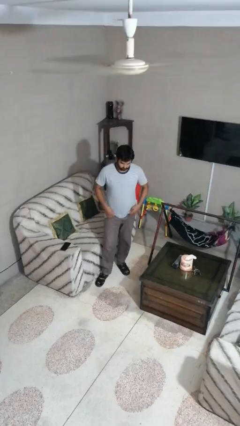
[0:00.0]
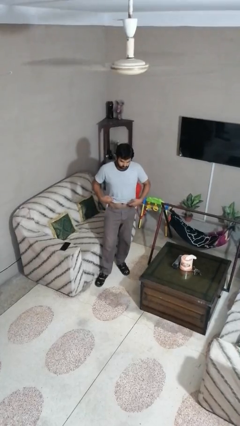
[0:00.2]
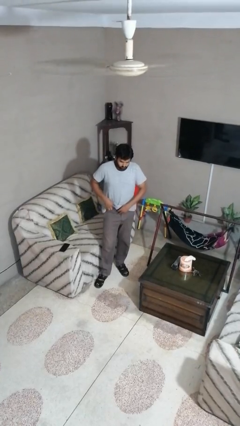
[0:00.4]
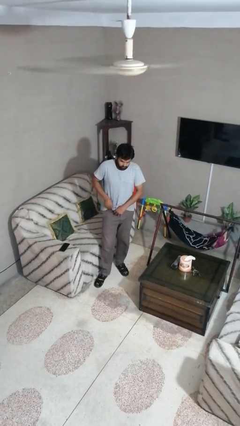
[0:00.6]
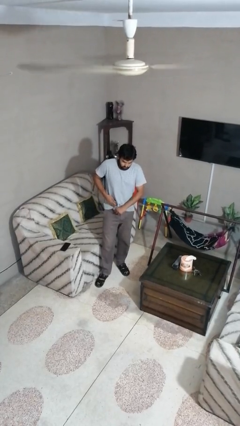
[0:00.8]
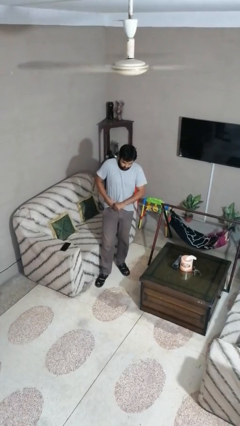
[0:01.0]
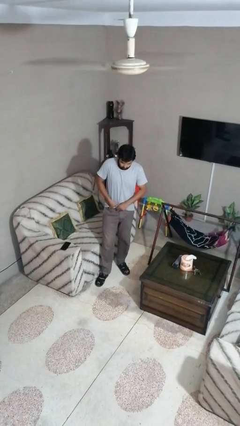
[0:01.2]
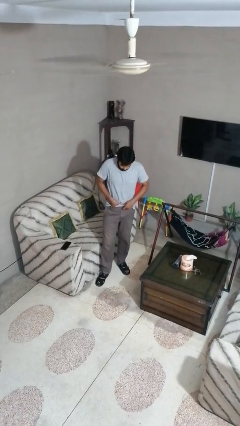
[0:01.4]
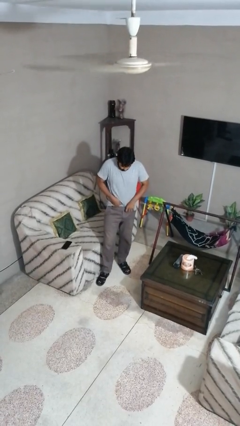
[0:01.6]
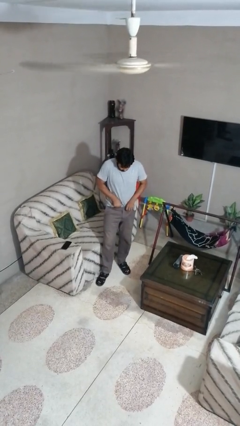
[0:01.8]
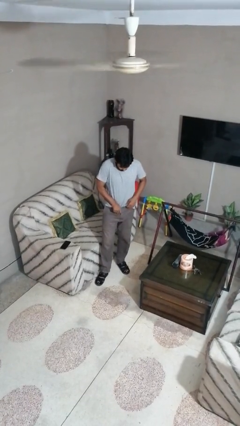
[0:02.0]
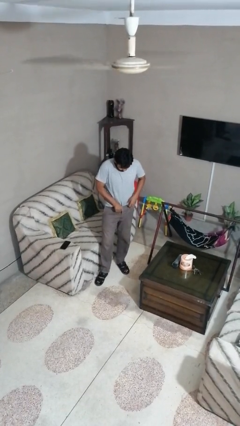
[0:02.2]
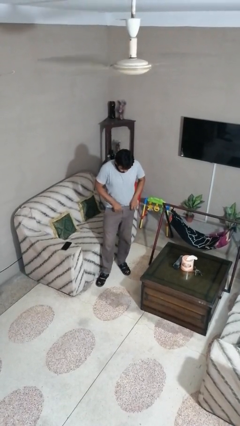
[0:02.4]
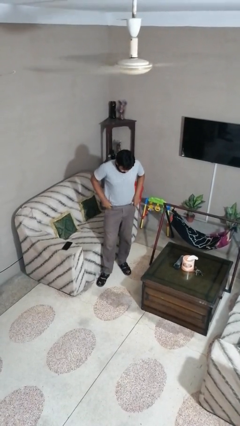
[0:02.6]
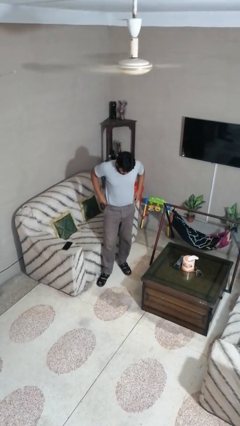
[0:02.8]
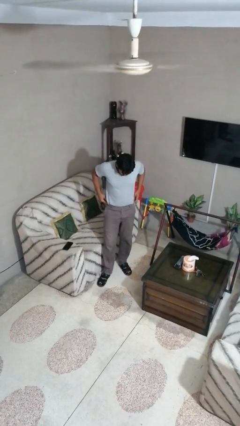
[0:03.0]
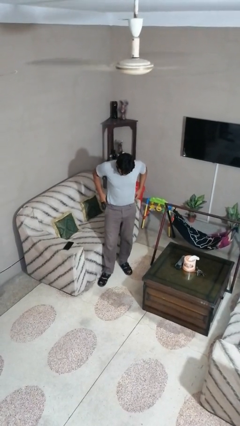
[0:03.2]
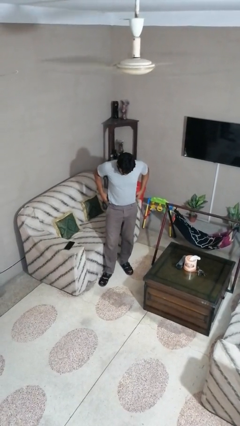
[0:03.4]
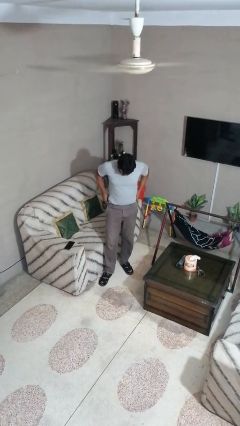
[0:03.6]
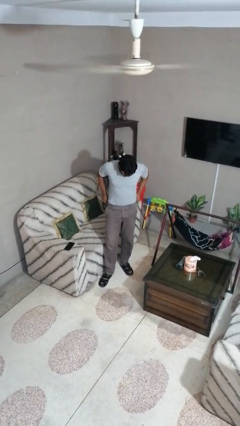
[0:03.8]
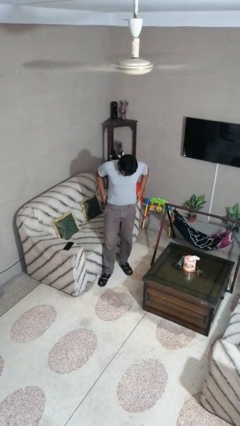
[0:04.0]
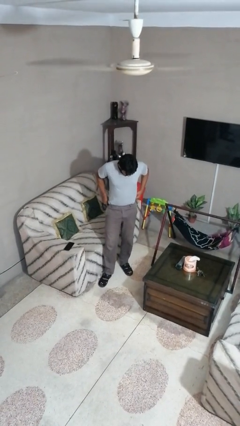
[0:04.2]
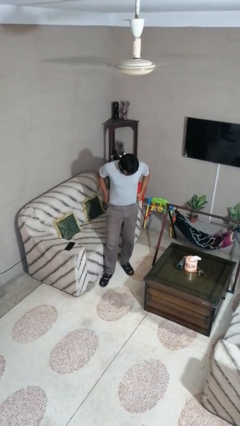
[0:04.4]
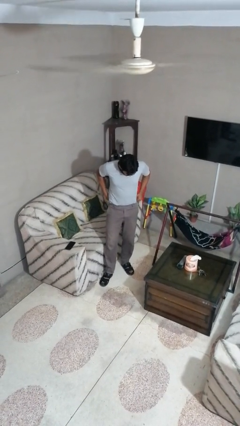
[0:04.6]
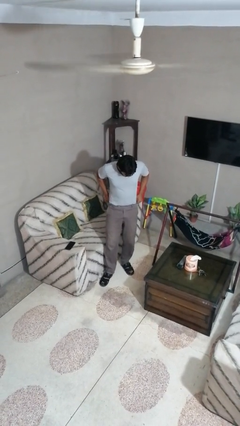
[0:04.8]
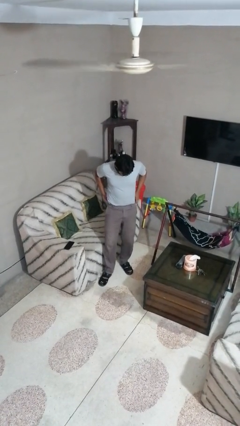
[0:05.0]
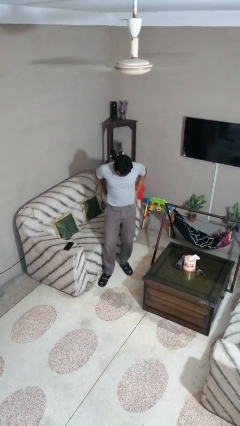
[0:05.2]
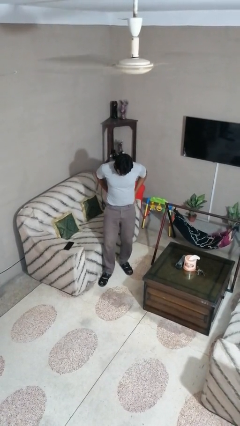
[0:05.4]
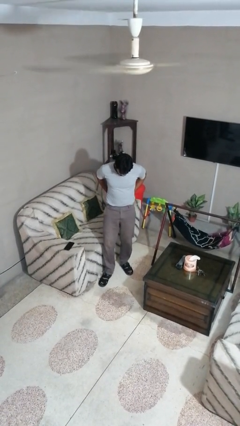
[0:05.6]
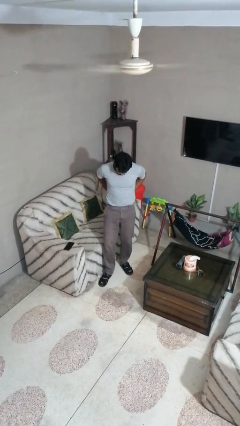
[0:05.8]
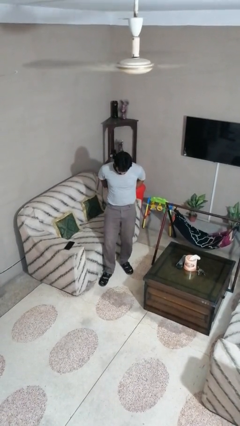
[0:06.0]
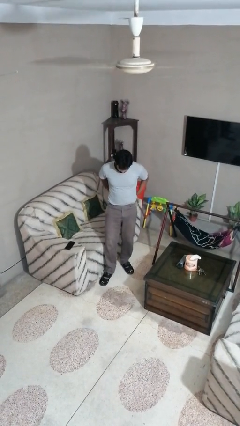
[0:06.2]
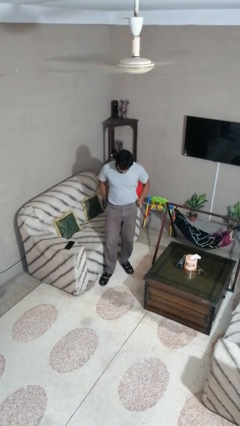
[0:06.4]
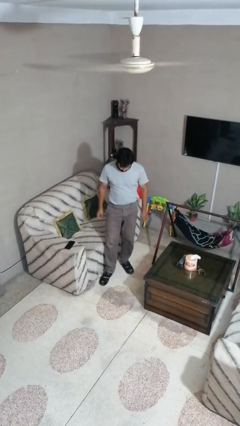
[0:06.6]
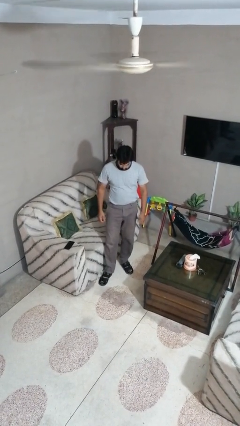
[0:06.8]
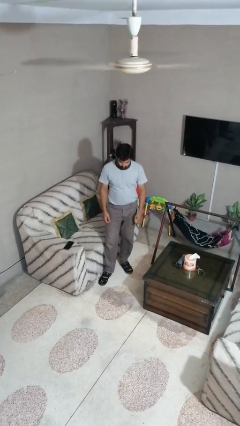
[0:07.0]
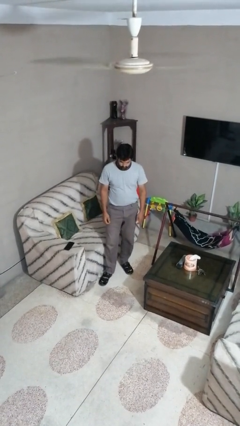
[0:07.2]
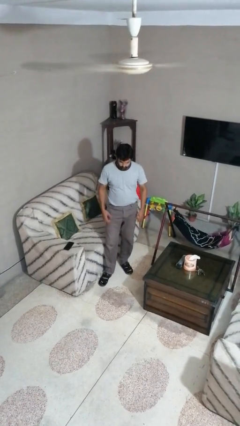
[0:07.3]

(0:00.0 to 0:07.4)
person tucks in shirt

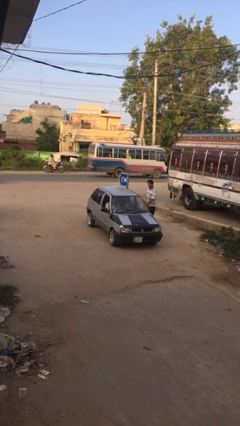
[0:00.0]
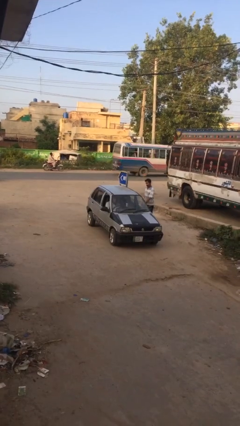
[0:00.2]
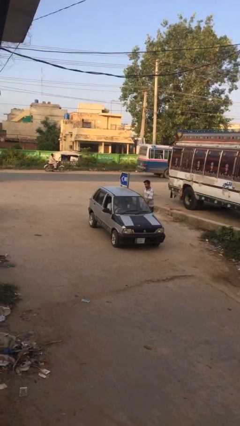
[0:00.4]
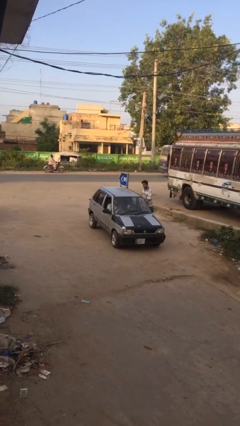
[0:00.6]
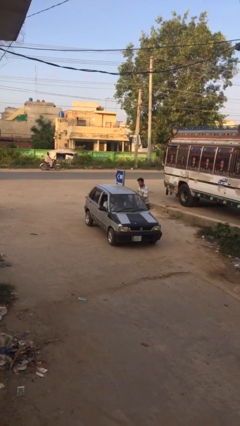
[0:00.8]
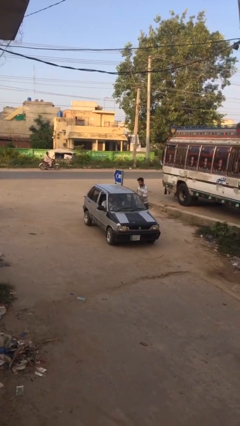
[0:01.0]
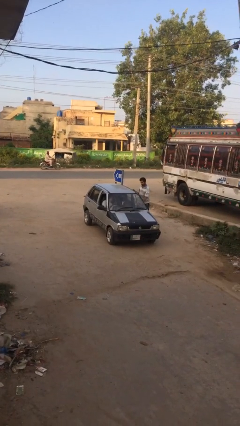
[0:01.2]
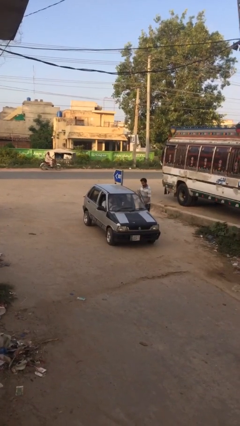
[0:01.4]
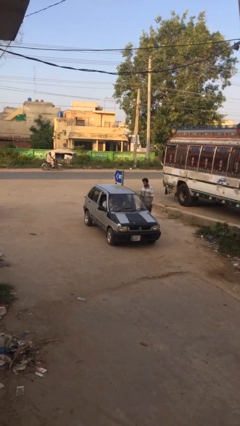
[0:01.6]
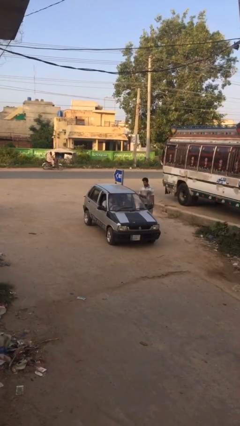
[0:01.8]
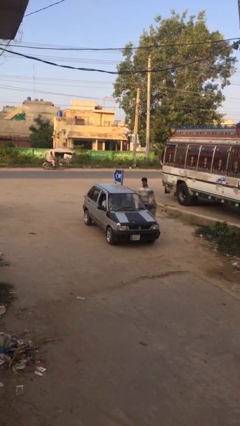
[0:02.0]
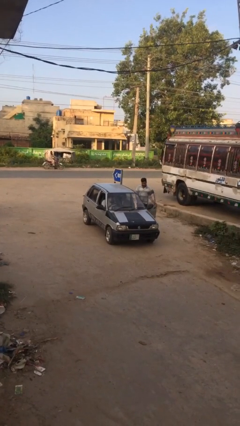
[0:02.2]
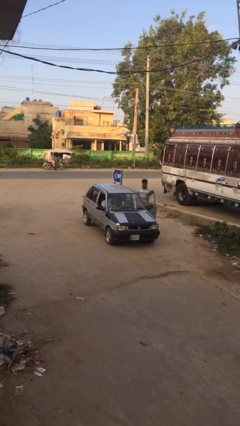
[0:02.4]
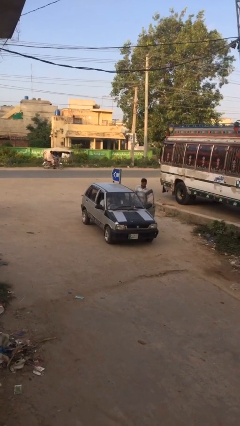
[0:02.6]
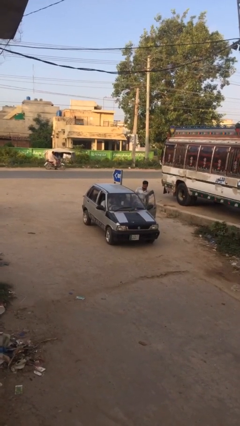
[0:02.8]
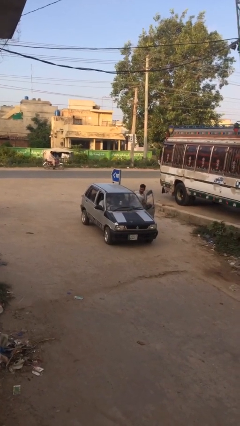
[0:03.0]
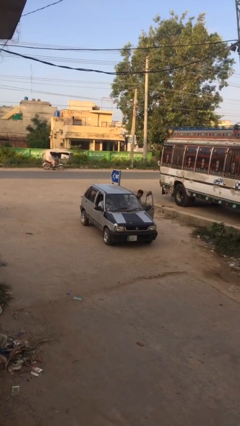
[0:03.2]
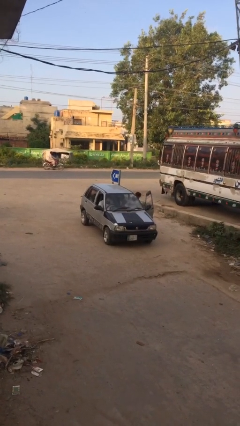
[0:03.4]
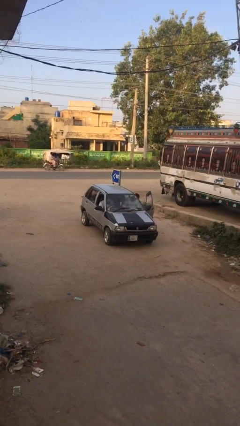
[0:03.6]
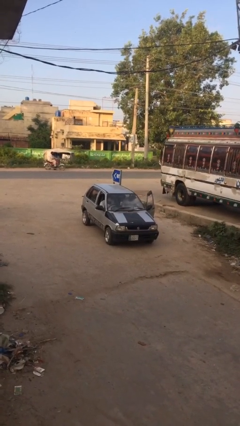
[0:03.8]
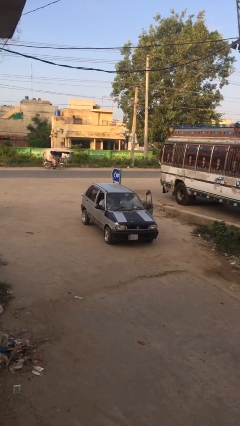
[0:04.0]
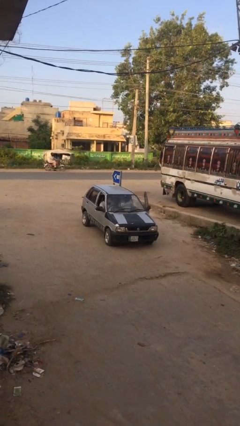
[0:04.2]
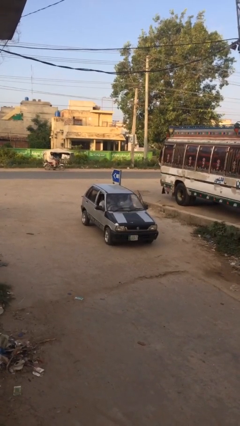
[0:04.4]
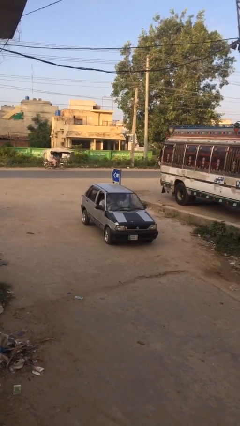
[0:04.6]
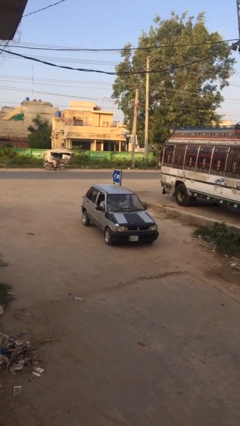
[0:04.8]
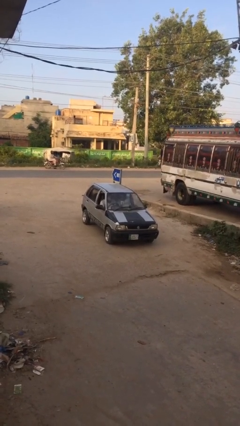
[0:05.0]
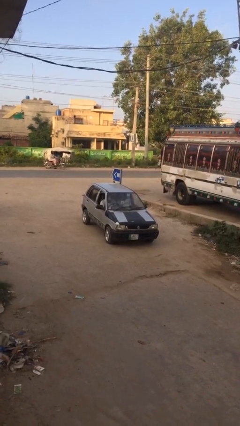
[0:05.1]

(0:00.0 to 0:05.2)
car picks up person

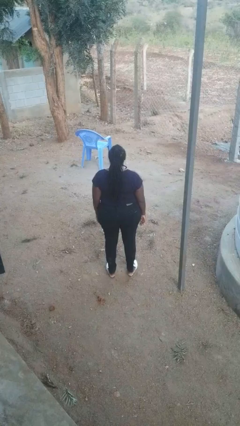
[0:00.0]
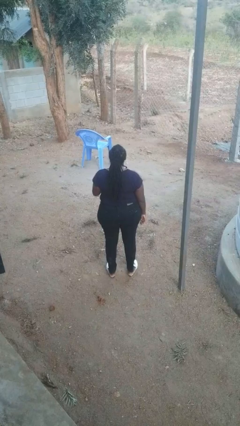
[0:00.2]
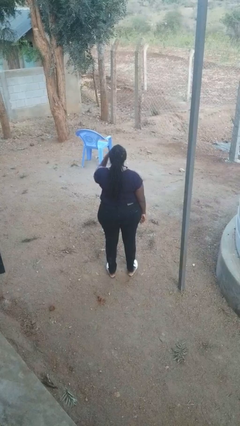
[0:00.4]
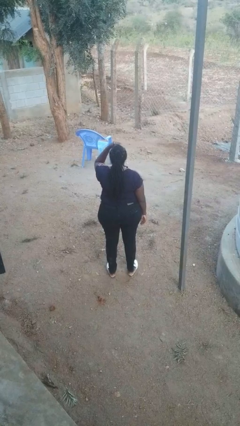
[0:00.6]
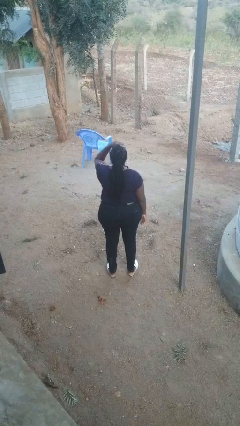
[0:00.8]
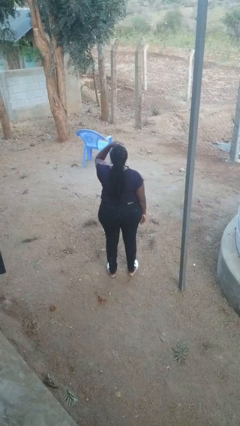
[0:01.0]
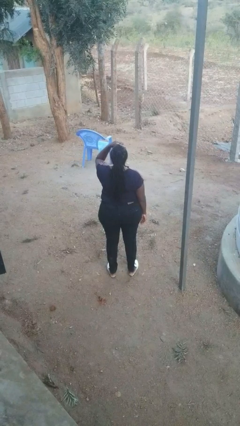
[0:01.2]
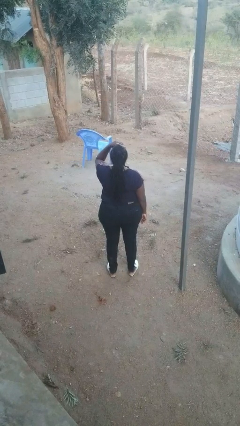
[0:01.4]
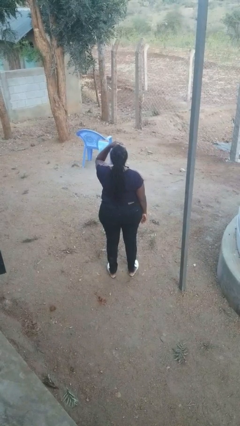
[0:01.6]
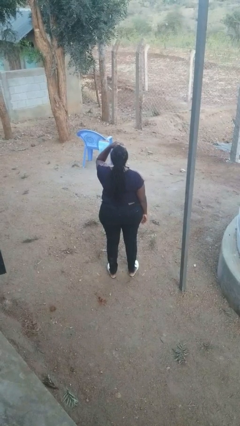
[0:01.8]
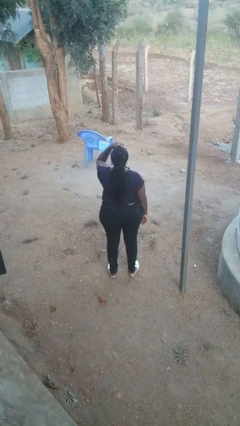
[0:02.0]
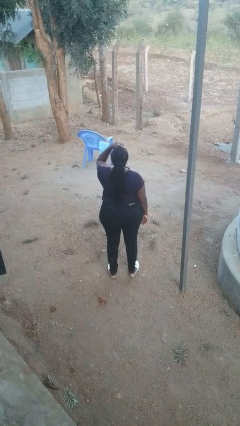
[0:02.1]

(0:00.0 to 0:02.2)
person shades eyes

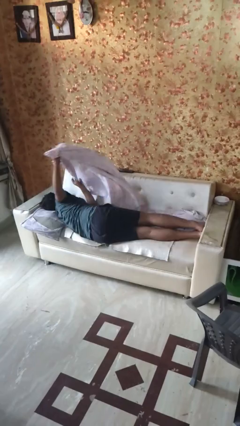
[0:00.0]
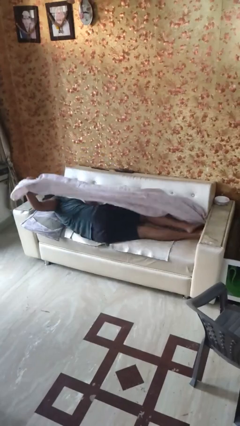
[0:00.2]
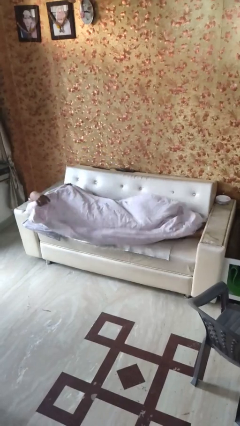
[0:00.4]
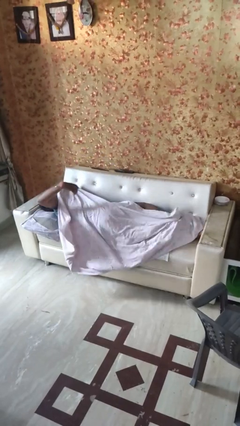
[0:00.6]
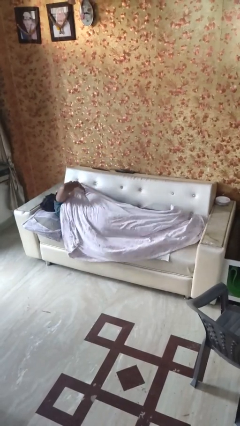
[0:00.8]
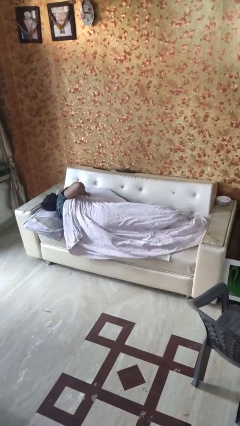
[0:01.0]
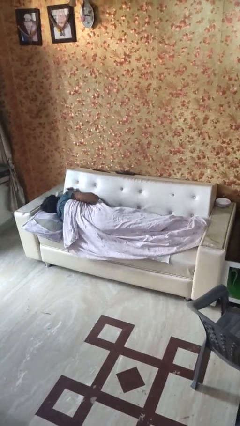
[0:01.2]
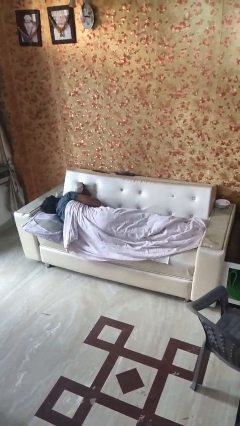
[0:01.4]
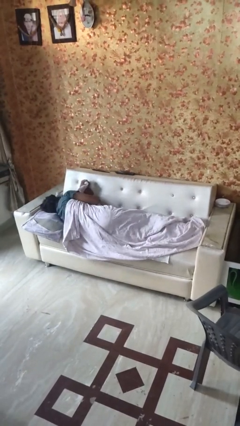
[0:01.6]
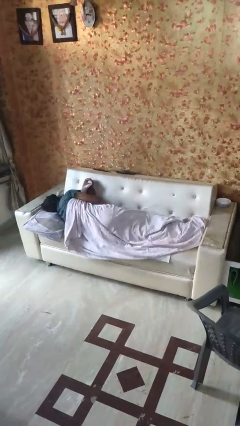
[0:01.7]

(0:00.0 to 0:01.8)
person covers with bedsheets

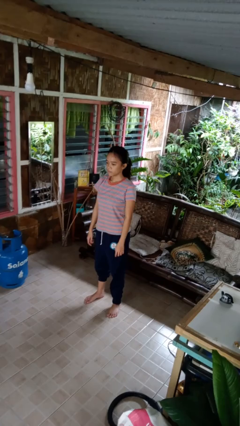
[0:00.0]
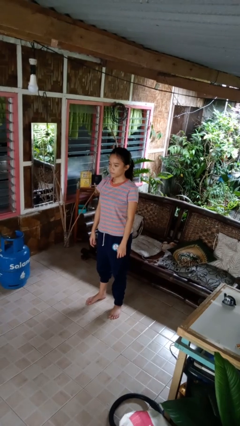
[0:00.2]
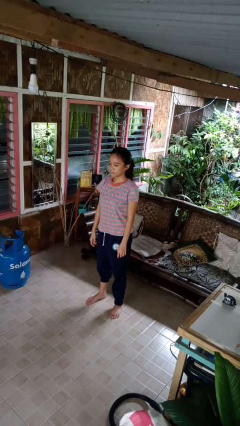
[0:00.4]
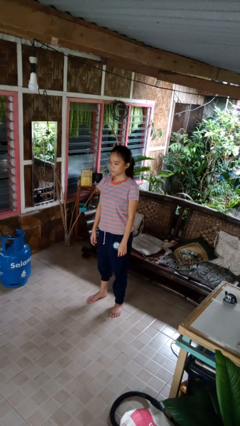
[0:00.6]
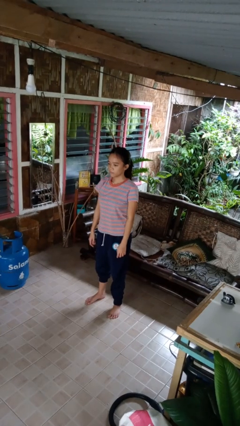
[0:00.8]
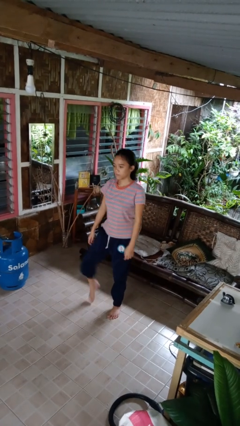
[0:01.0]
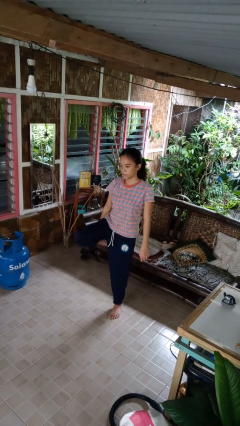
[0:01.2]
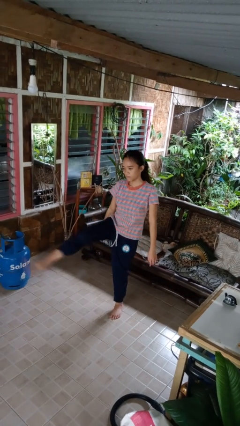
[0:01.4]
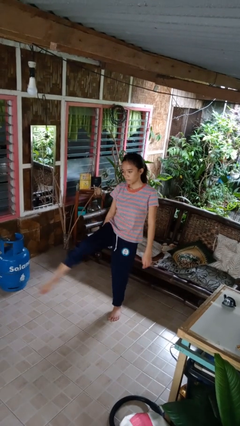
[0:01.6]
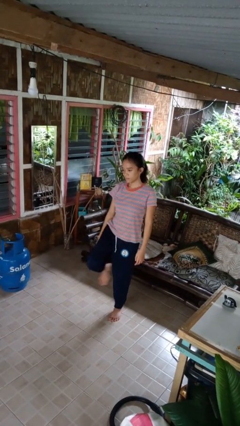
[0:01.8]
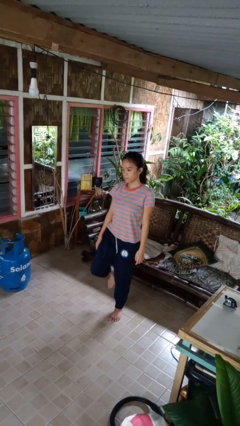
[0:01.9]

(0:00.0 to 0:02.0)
person karate kicks
